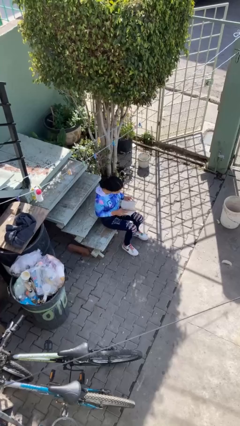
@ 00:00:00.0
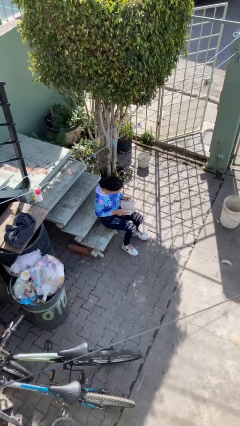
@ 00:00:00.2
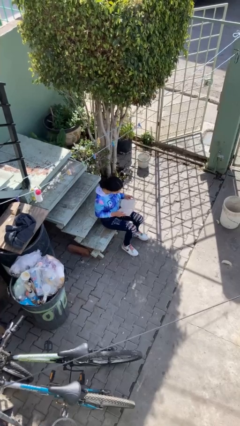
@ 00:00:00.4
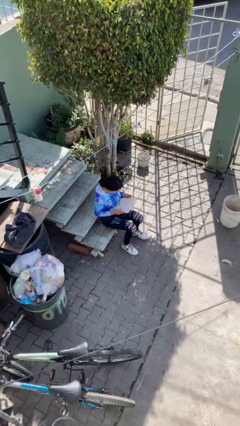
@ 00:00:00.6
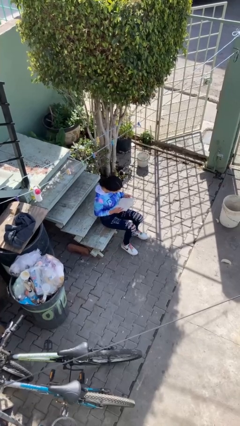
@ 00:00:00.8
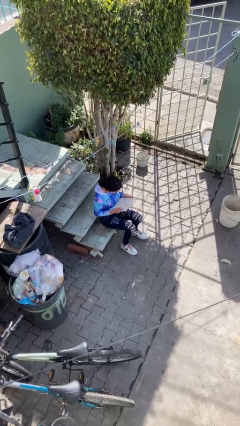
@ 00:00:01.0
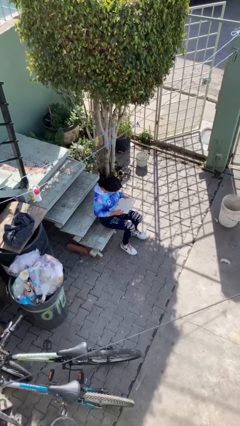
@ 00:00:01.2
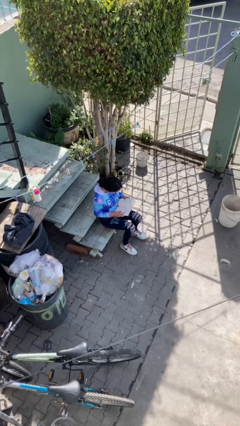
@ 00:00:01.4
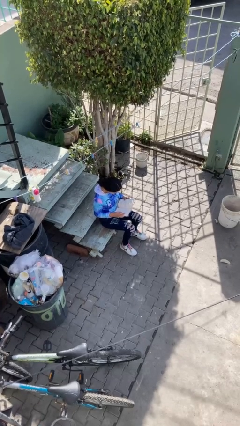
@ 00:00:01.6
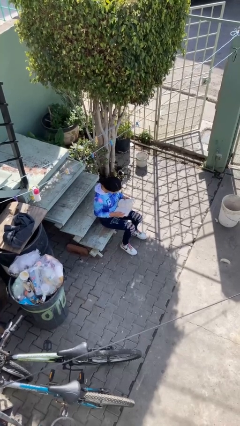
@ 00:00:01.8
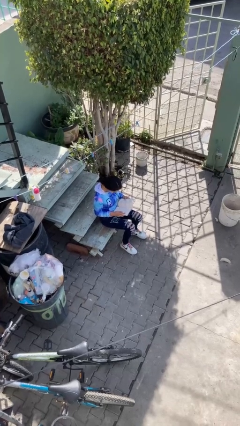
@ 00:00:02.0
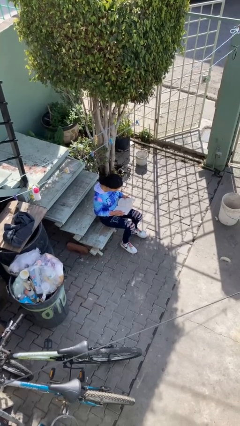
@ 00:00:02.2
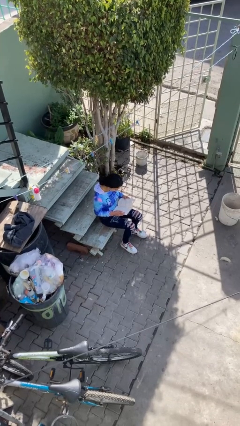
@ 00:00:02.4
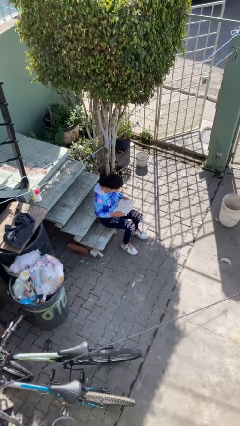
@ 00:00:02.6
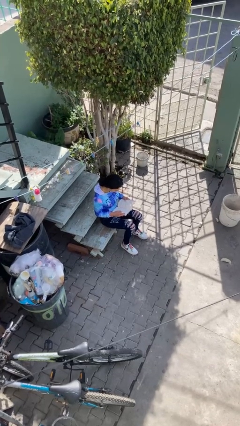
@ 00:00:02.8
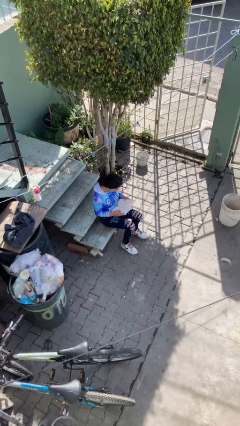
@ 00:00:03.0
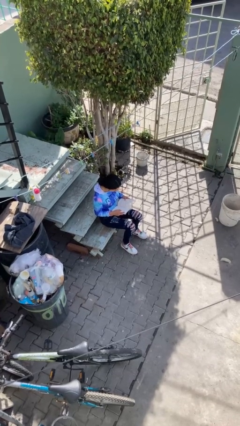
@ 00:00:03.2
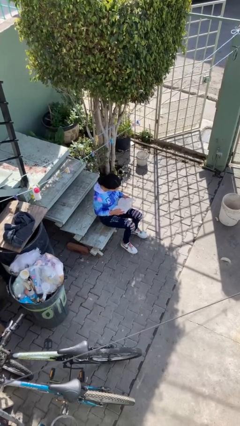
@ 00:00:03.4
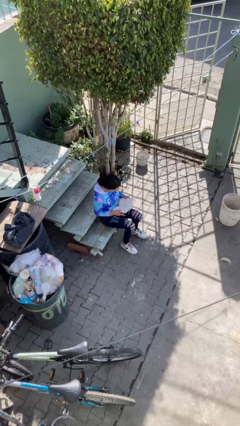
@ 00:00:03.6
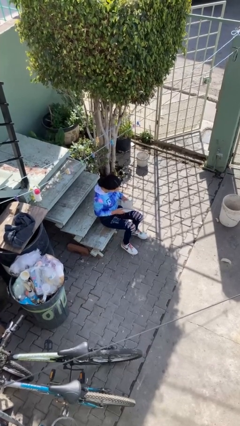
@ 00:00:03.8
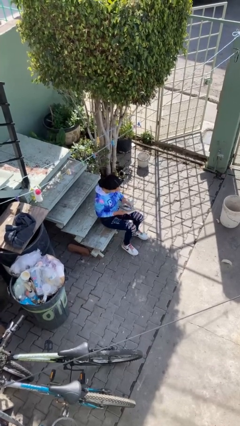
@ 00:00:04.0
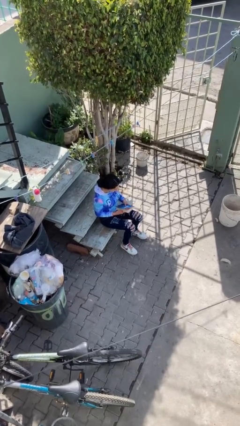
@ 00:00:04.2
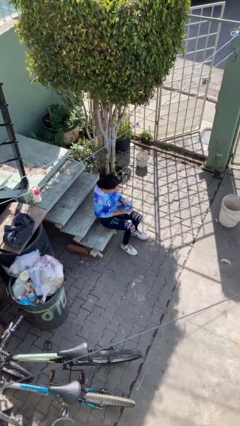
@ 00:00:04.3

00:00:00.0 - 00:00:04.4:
person reads document

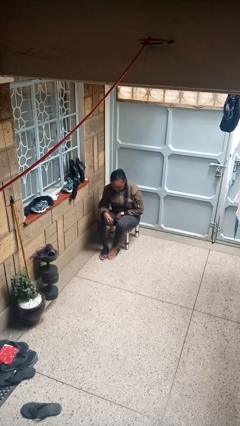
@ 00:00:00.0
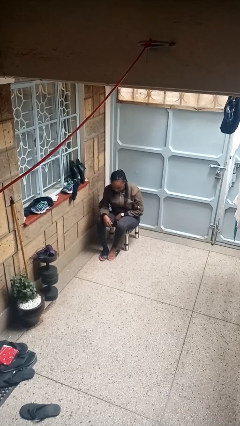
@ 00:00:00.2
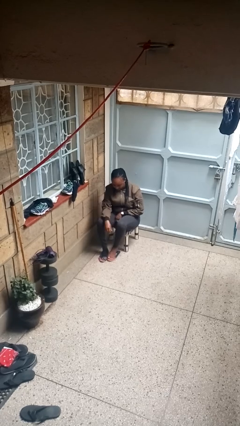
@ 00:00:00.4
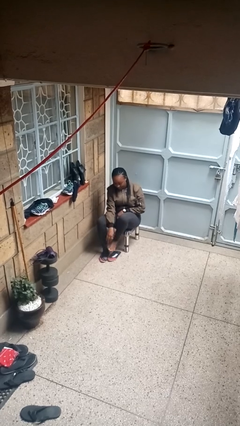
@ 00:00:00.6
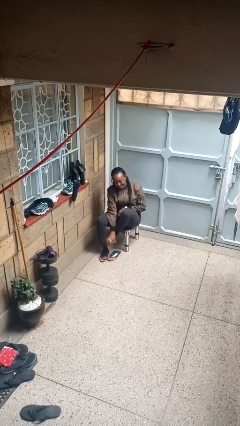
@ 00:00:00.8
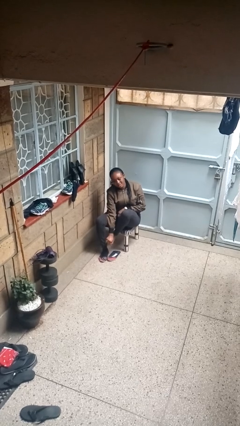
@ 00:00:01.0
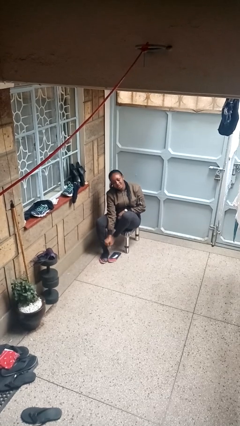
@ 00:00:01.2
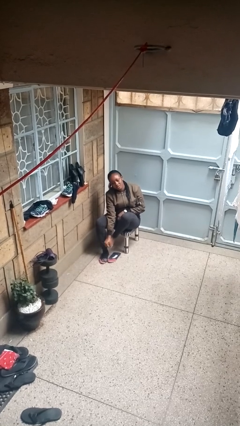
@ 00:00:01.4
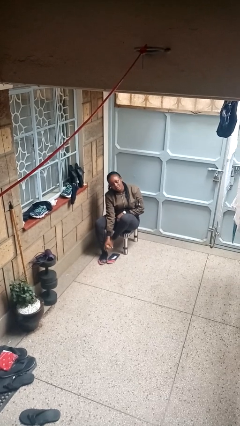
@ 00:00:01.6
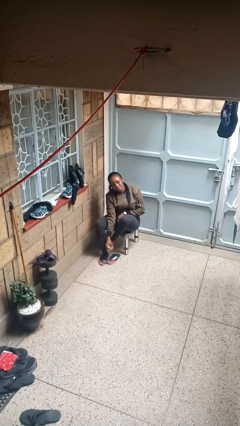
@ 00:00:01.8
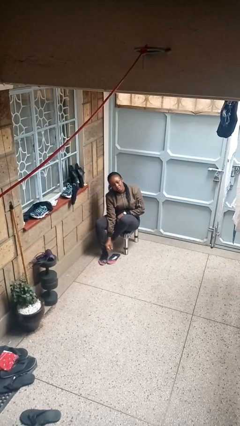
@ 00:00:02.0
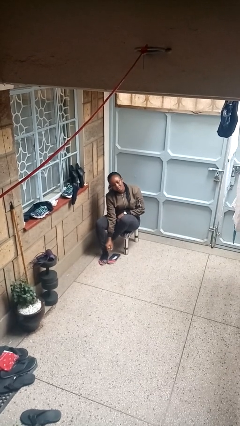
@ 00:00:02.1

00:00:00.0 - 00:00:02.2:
person rubs foot

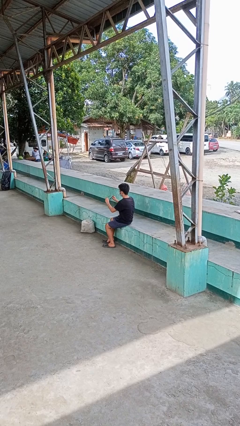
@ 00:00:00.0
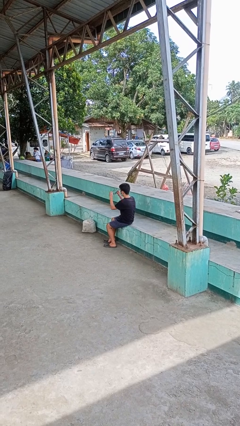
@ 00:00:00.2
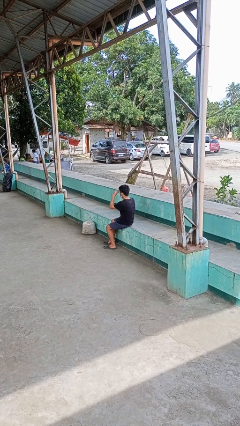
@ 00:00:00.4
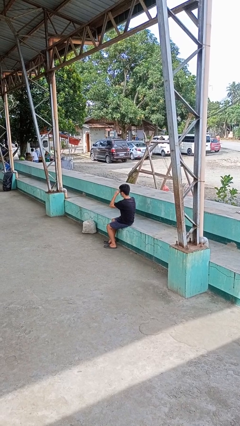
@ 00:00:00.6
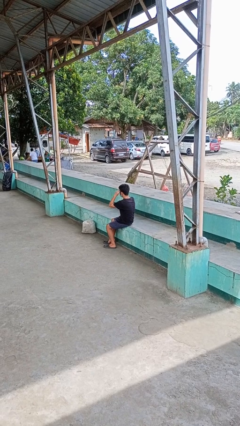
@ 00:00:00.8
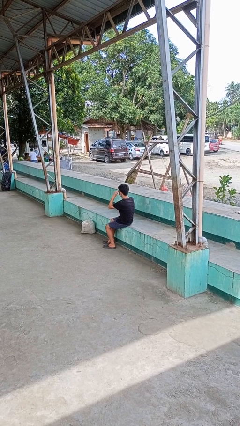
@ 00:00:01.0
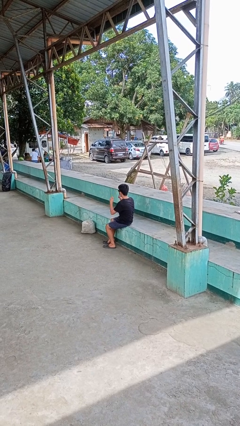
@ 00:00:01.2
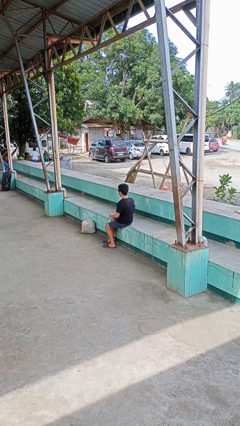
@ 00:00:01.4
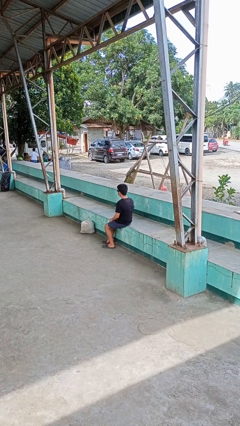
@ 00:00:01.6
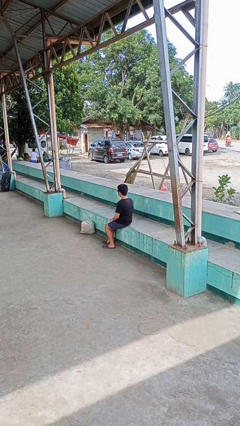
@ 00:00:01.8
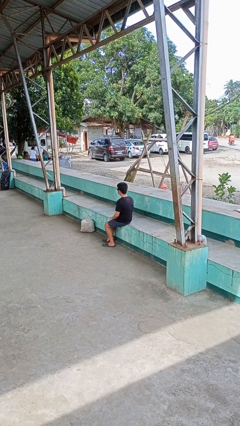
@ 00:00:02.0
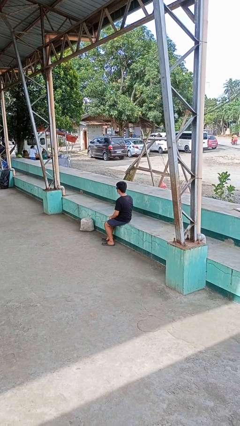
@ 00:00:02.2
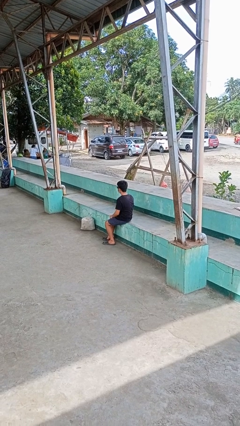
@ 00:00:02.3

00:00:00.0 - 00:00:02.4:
person puts on sunglasses

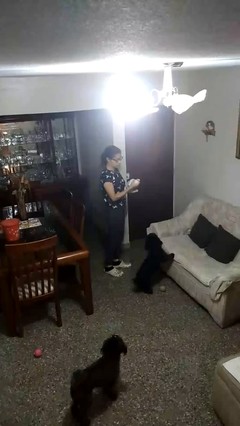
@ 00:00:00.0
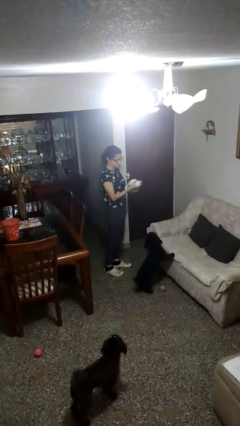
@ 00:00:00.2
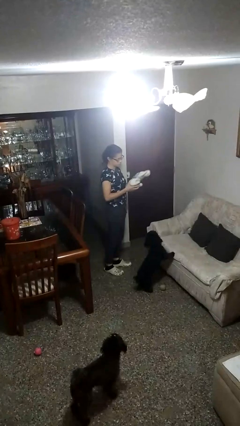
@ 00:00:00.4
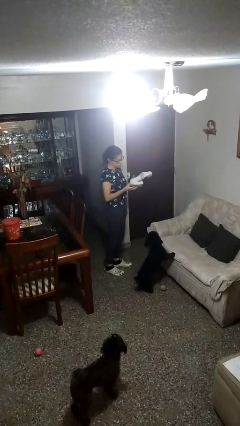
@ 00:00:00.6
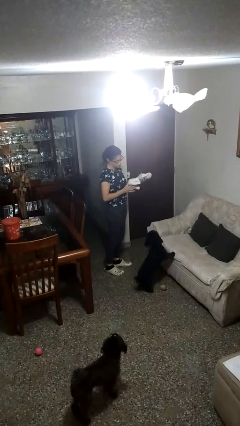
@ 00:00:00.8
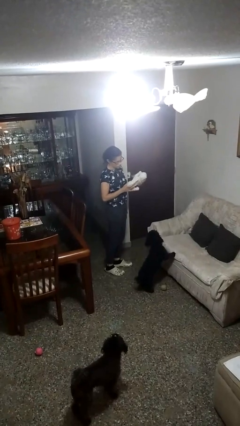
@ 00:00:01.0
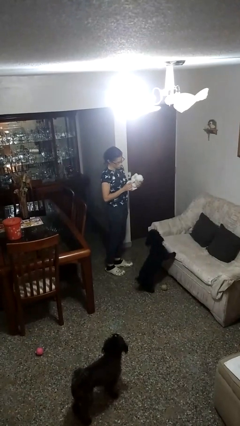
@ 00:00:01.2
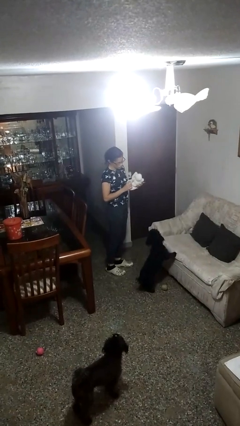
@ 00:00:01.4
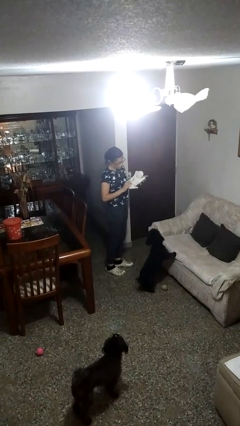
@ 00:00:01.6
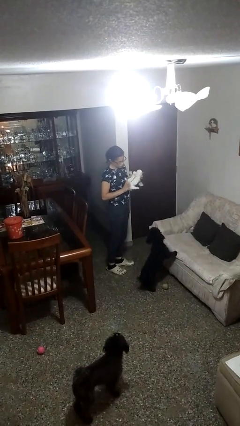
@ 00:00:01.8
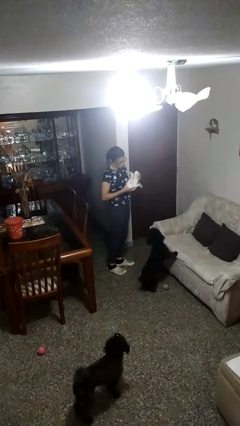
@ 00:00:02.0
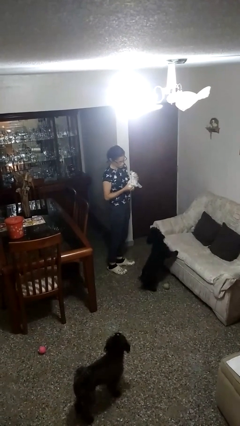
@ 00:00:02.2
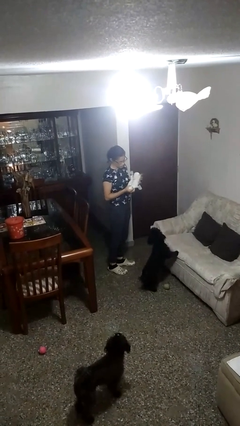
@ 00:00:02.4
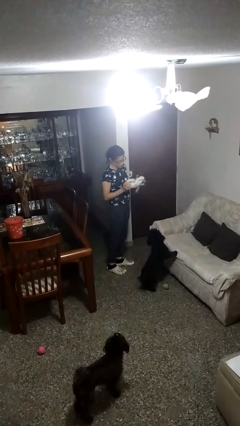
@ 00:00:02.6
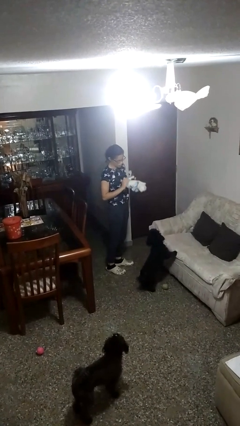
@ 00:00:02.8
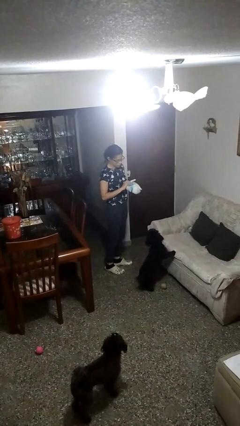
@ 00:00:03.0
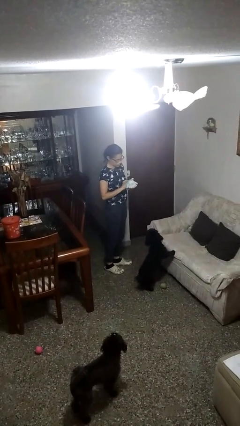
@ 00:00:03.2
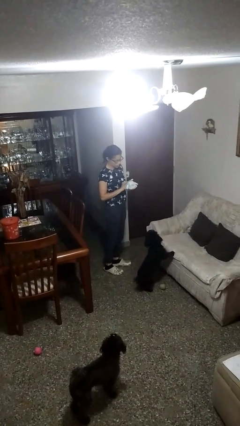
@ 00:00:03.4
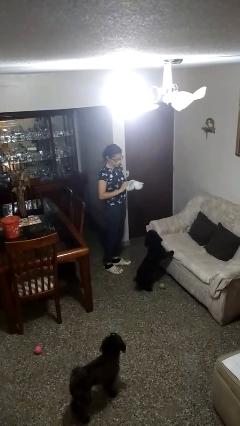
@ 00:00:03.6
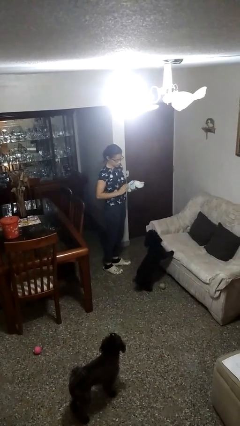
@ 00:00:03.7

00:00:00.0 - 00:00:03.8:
person squeezes object

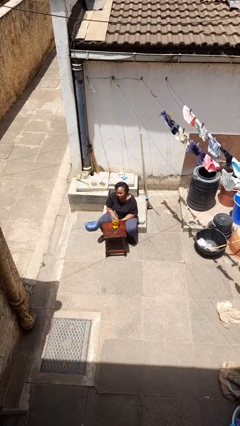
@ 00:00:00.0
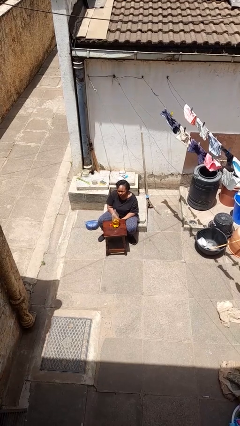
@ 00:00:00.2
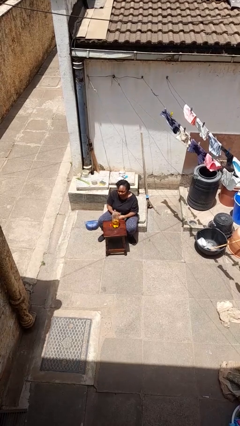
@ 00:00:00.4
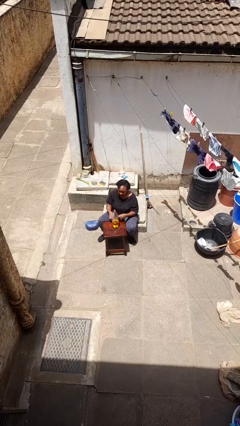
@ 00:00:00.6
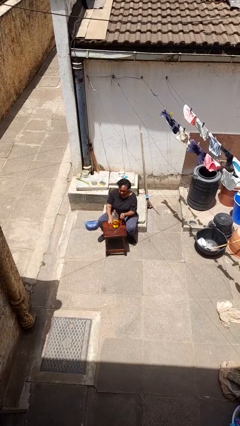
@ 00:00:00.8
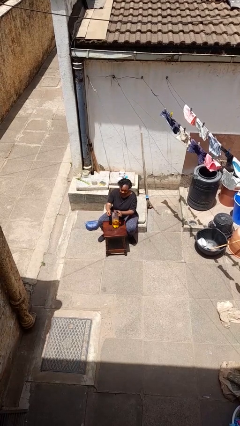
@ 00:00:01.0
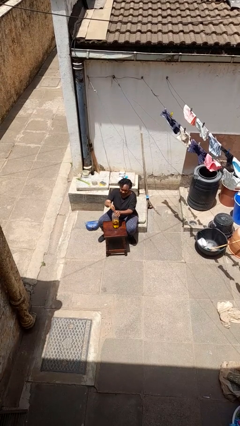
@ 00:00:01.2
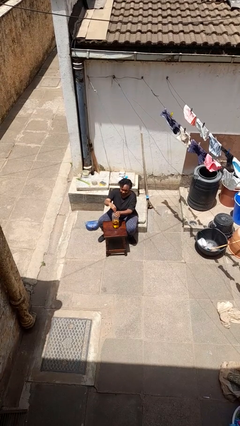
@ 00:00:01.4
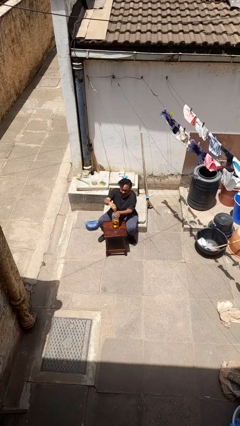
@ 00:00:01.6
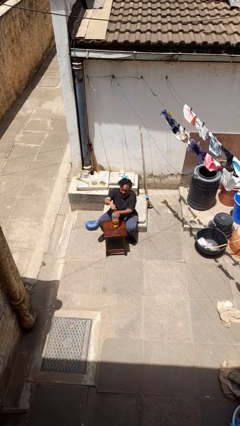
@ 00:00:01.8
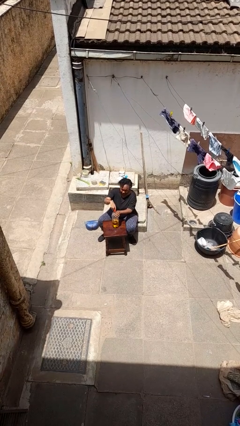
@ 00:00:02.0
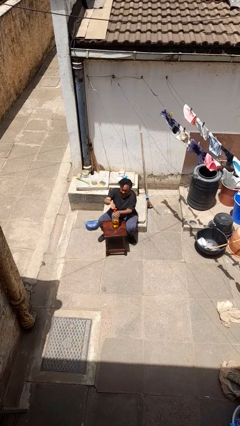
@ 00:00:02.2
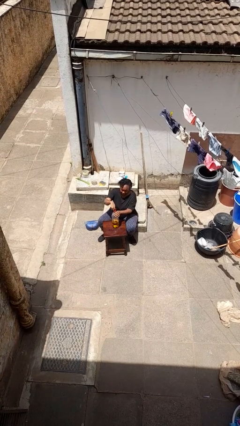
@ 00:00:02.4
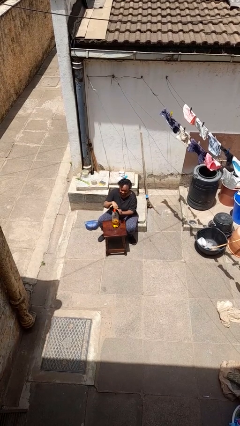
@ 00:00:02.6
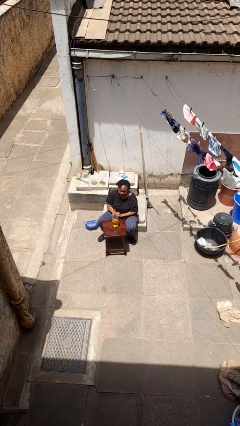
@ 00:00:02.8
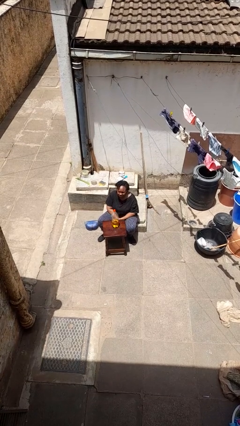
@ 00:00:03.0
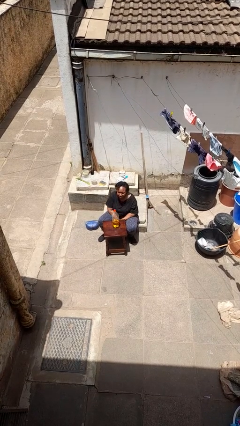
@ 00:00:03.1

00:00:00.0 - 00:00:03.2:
person screws lid to bottle

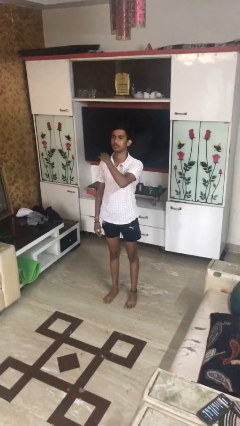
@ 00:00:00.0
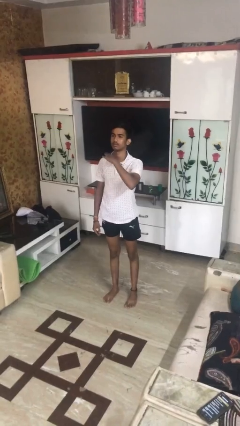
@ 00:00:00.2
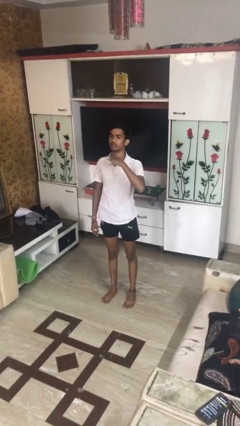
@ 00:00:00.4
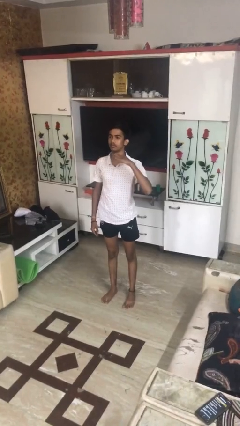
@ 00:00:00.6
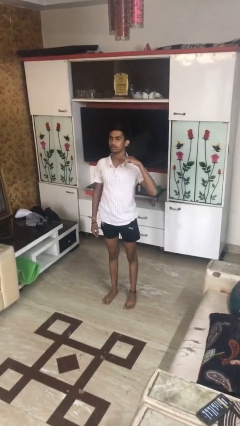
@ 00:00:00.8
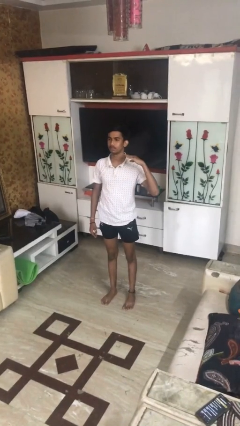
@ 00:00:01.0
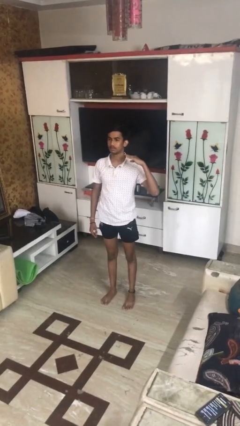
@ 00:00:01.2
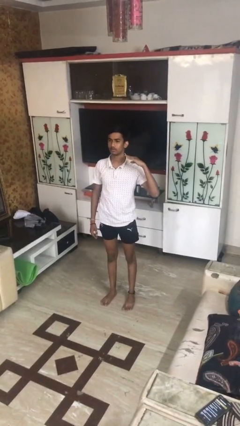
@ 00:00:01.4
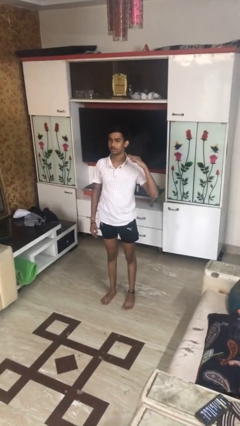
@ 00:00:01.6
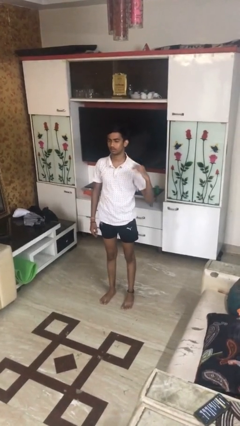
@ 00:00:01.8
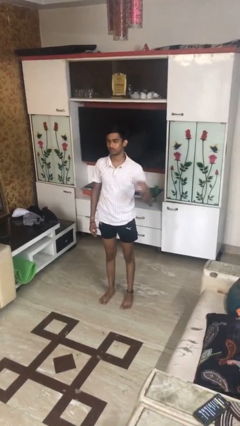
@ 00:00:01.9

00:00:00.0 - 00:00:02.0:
person gestures cut
